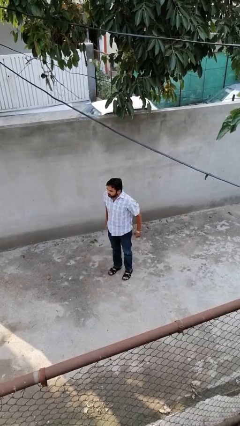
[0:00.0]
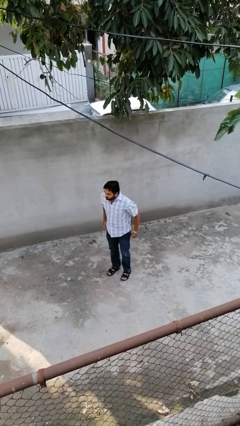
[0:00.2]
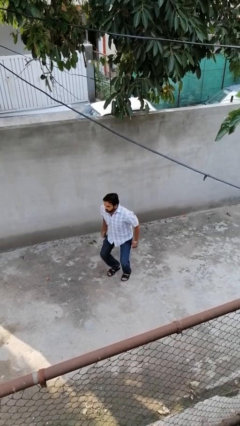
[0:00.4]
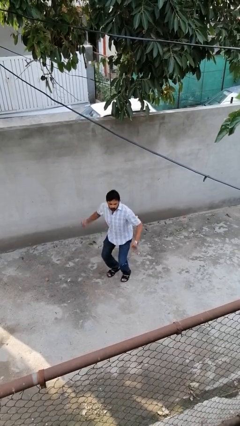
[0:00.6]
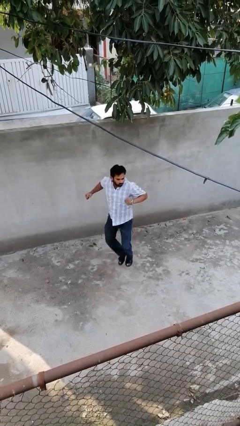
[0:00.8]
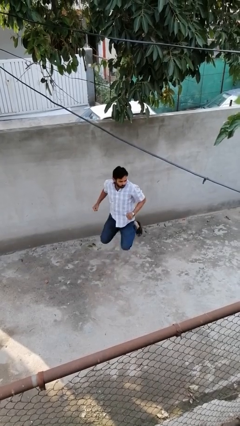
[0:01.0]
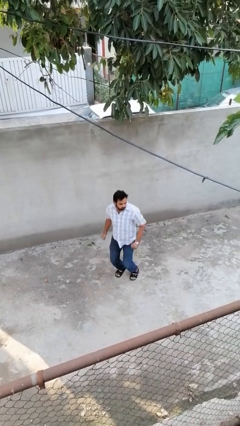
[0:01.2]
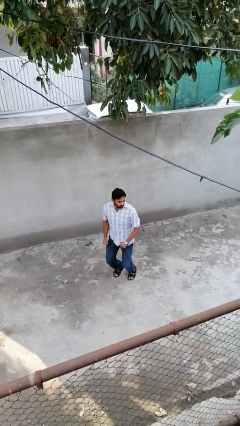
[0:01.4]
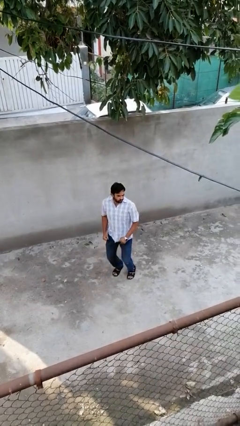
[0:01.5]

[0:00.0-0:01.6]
person jumps

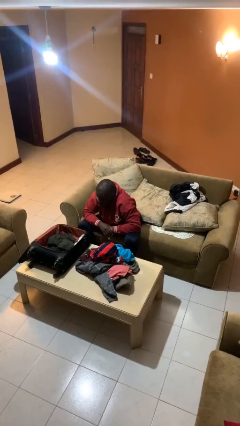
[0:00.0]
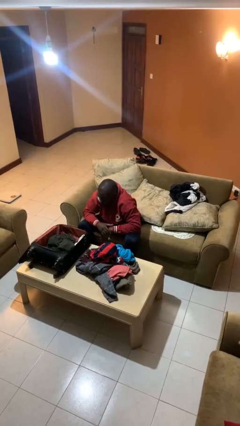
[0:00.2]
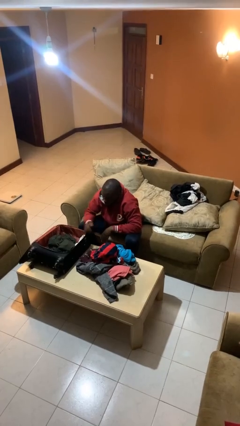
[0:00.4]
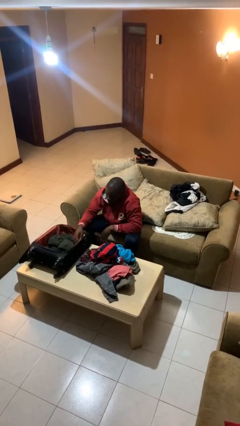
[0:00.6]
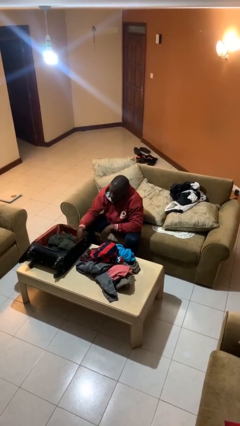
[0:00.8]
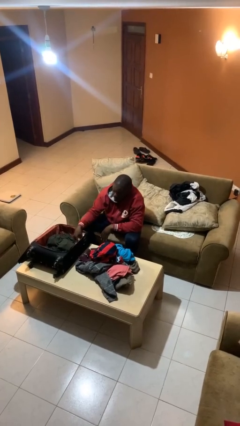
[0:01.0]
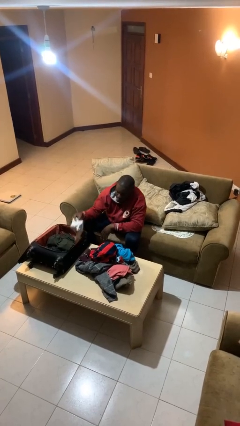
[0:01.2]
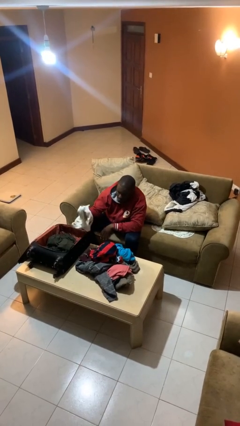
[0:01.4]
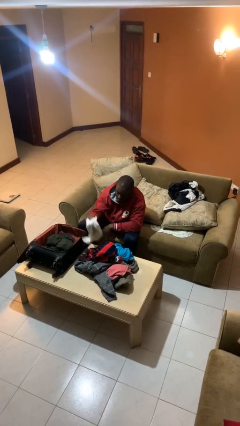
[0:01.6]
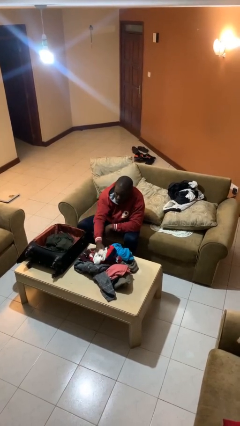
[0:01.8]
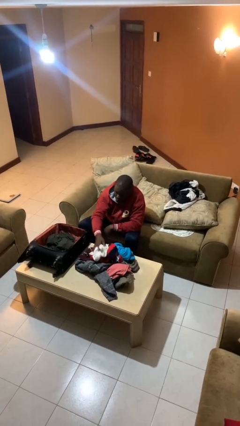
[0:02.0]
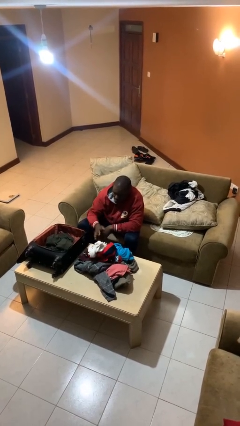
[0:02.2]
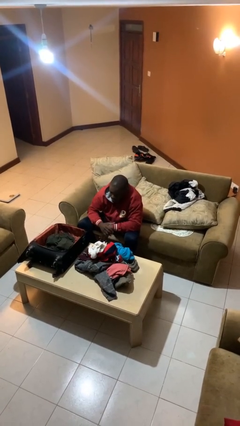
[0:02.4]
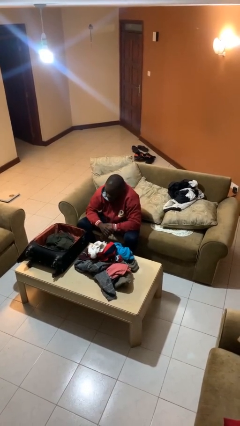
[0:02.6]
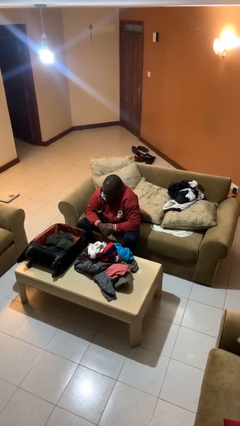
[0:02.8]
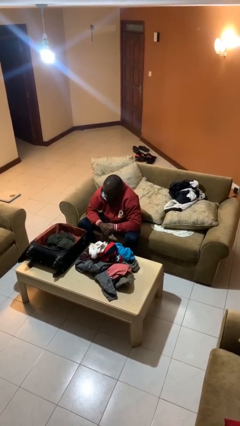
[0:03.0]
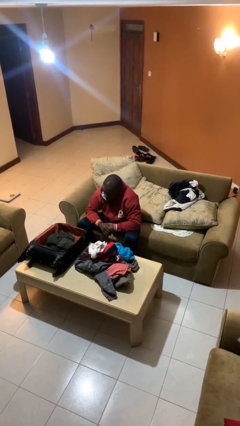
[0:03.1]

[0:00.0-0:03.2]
person unloads clothes from suitcase

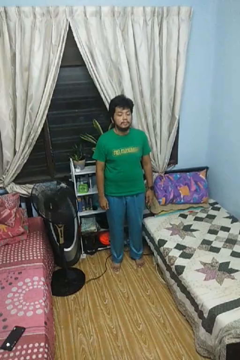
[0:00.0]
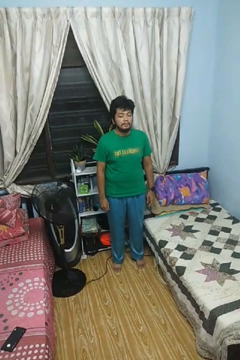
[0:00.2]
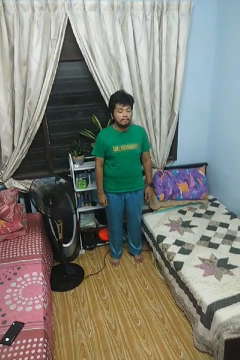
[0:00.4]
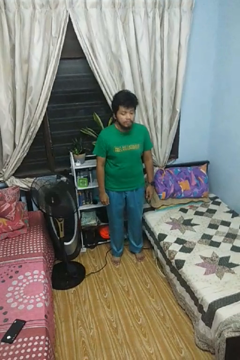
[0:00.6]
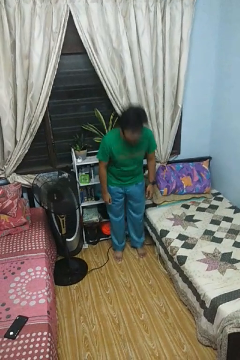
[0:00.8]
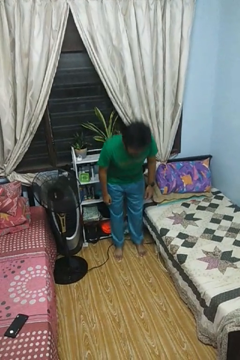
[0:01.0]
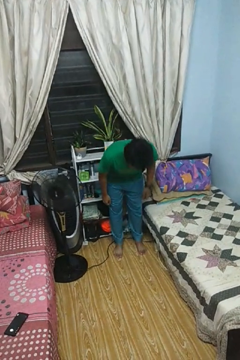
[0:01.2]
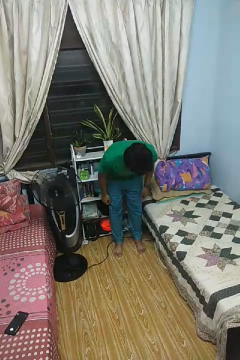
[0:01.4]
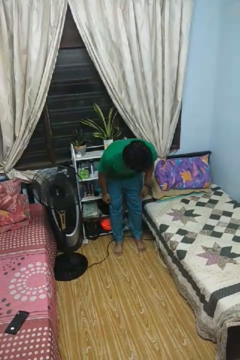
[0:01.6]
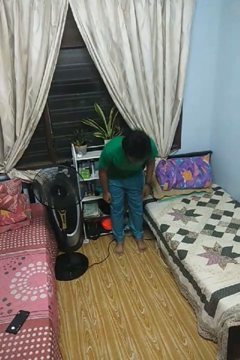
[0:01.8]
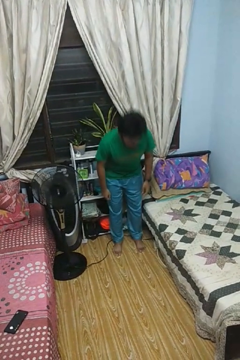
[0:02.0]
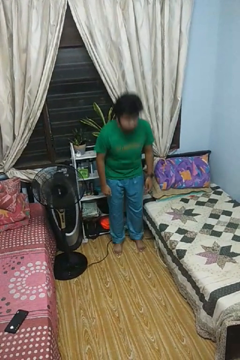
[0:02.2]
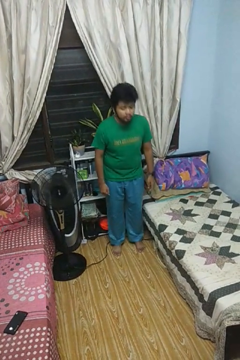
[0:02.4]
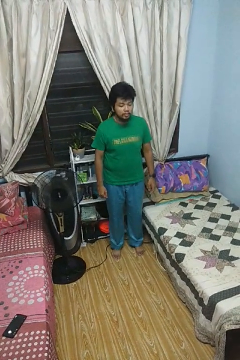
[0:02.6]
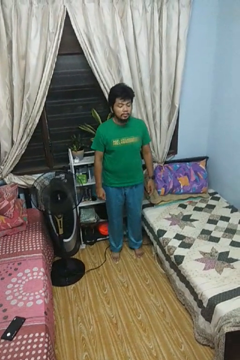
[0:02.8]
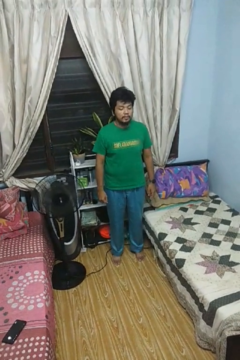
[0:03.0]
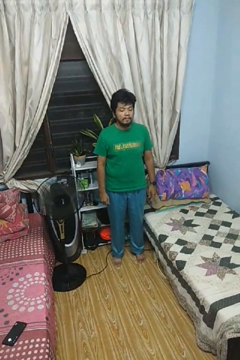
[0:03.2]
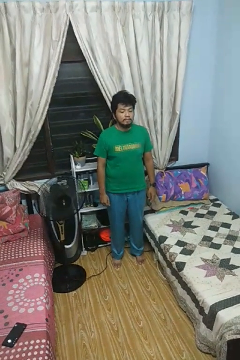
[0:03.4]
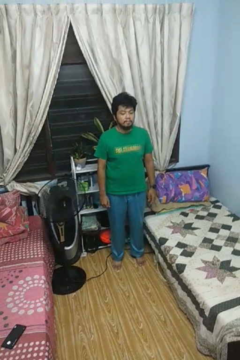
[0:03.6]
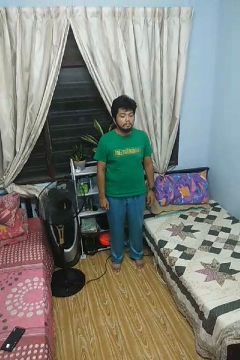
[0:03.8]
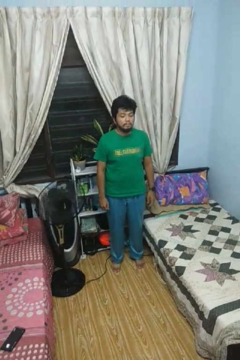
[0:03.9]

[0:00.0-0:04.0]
person bows

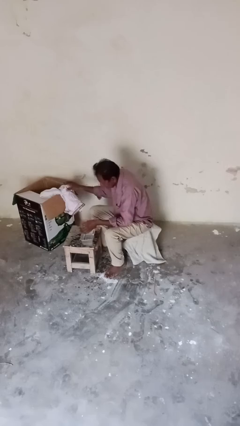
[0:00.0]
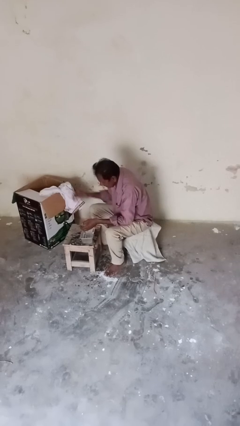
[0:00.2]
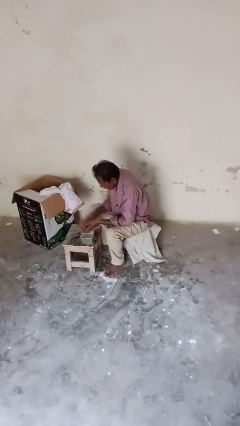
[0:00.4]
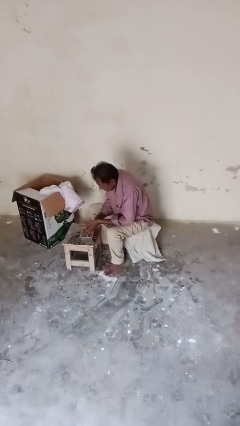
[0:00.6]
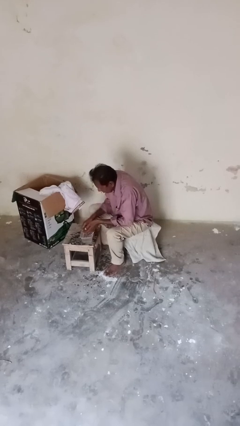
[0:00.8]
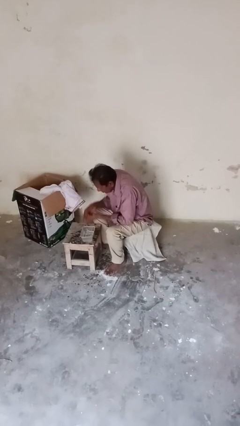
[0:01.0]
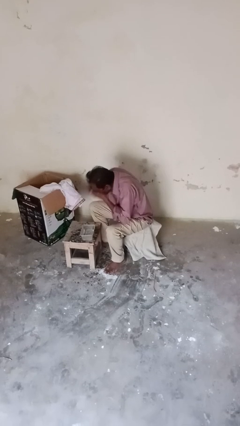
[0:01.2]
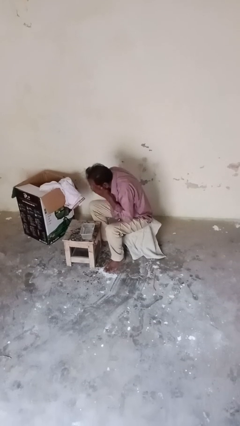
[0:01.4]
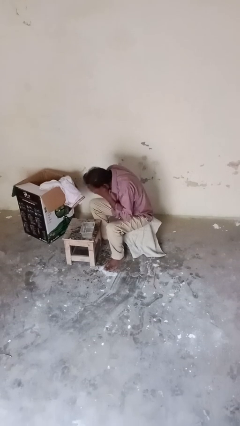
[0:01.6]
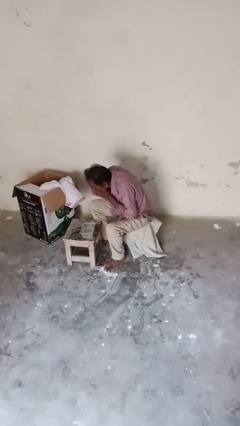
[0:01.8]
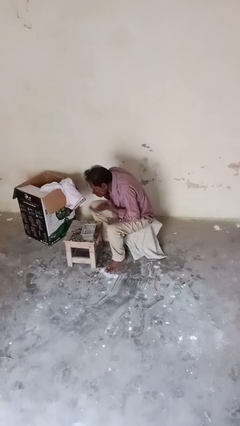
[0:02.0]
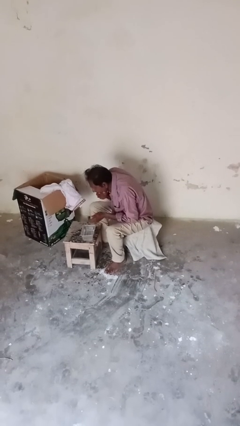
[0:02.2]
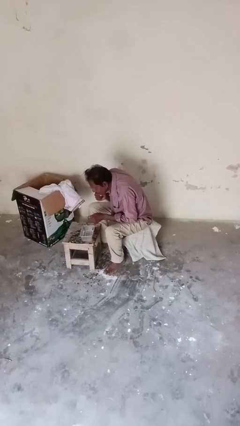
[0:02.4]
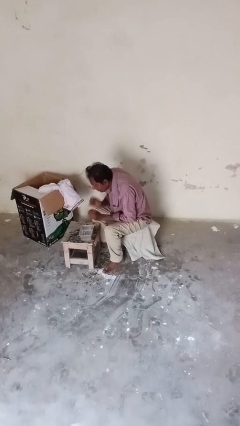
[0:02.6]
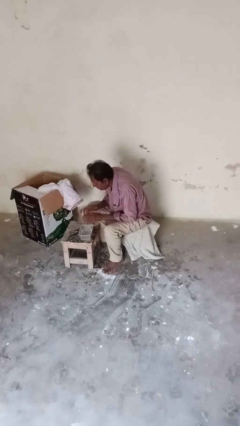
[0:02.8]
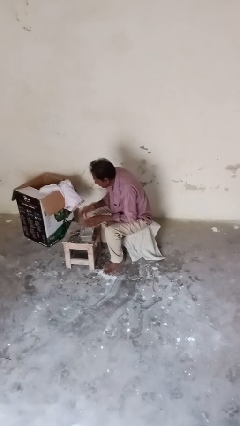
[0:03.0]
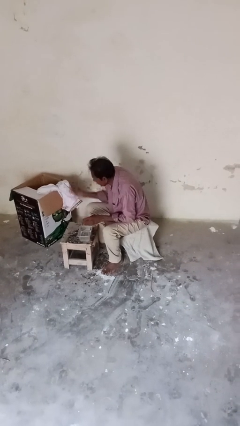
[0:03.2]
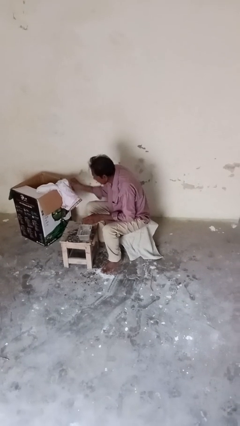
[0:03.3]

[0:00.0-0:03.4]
person washes face

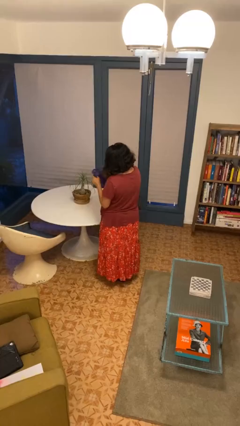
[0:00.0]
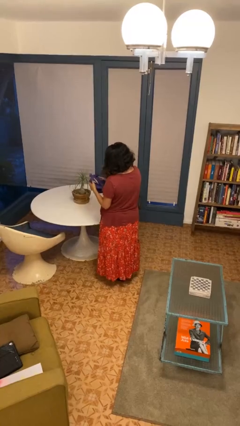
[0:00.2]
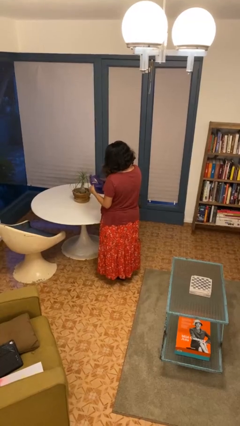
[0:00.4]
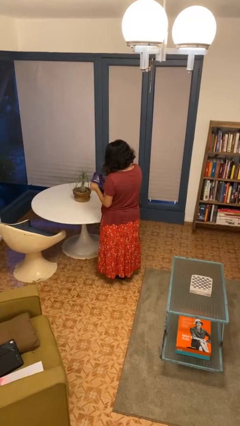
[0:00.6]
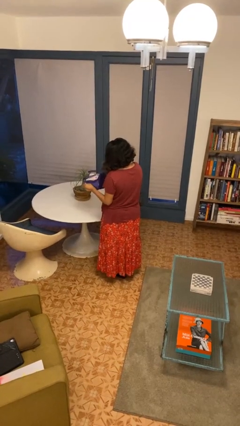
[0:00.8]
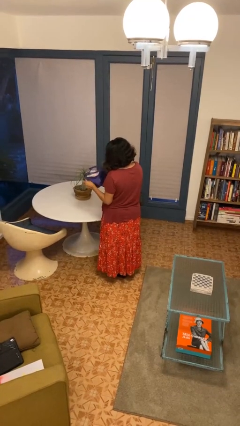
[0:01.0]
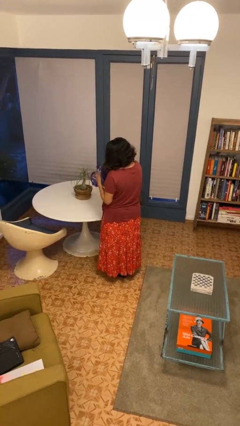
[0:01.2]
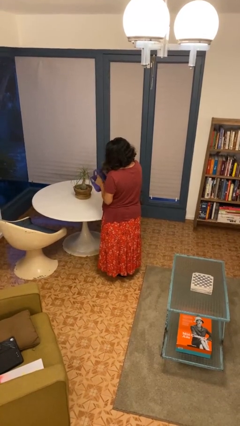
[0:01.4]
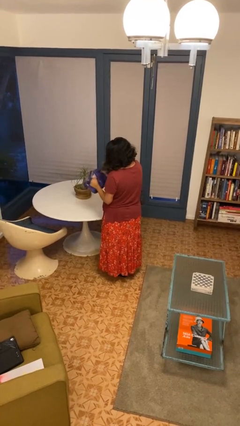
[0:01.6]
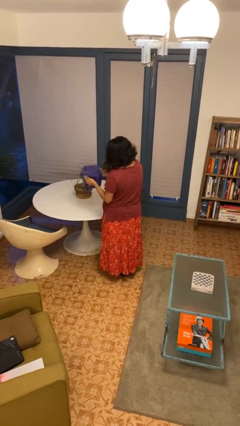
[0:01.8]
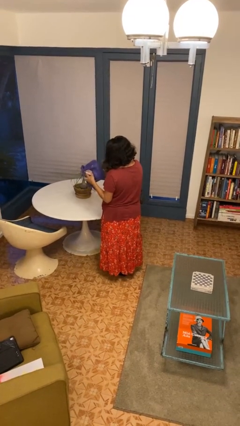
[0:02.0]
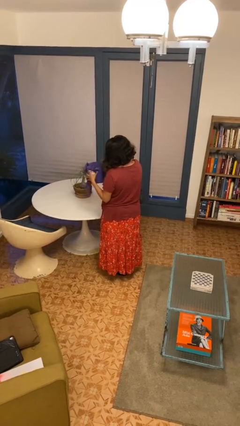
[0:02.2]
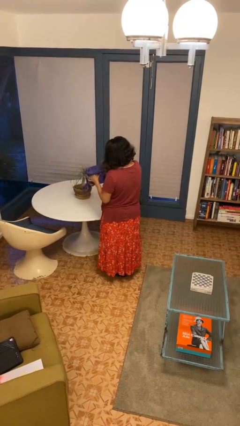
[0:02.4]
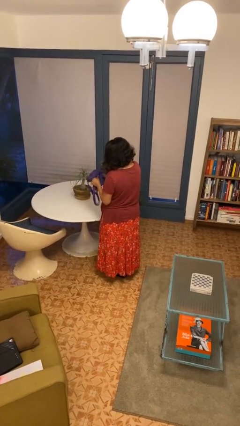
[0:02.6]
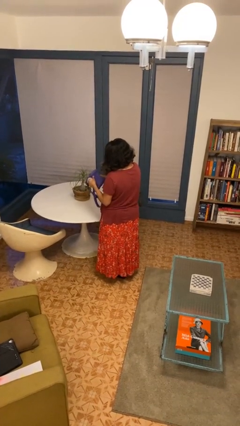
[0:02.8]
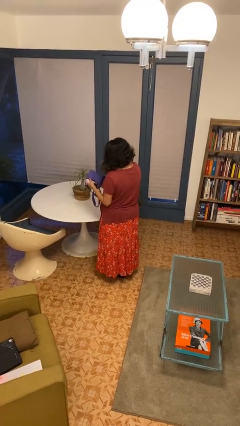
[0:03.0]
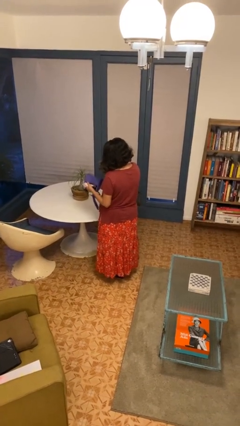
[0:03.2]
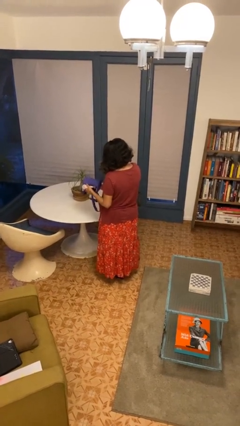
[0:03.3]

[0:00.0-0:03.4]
person squeezes object

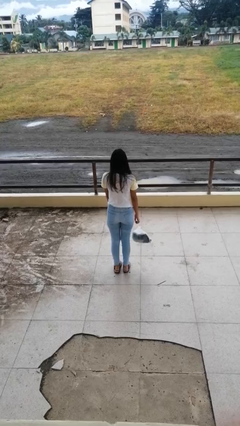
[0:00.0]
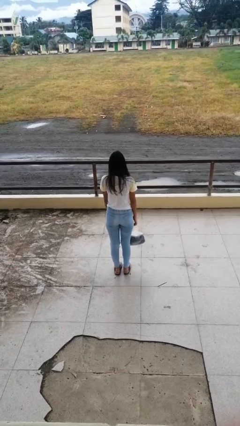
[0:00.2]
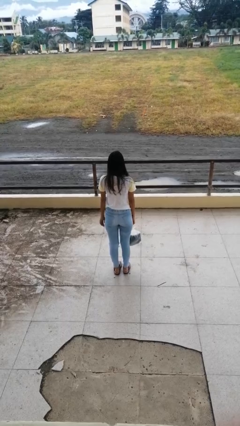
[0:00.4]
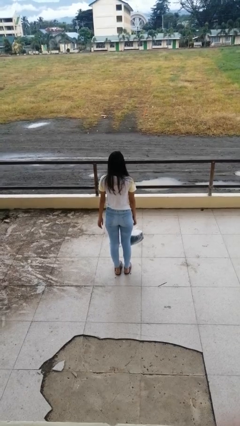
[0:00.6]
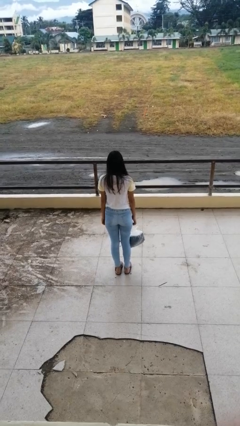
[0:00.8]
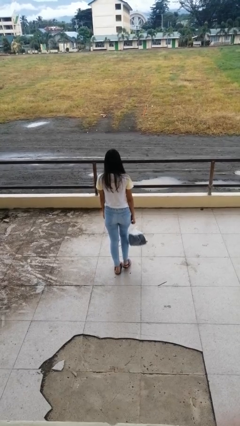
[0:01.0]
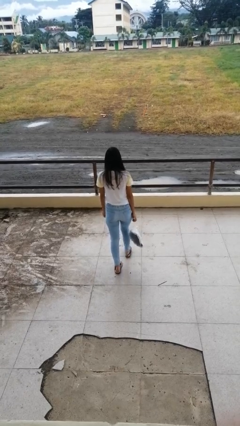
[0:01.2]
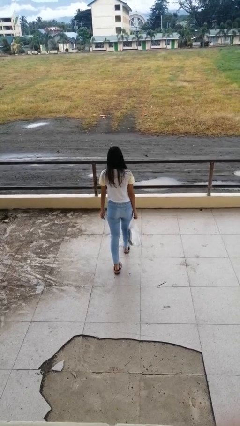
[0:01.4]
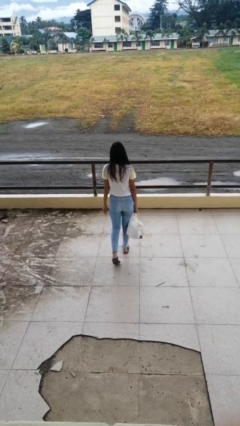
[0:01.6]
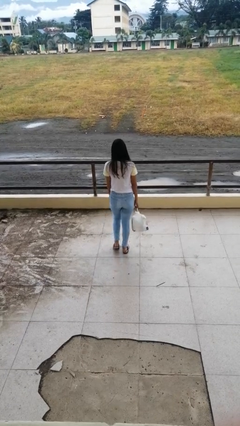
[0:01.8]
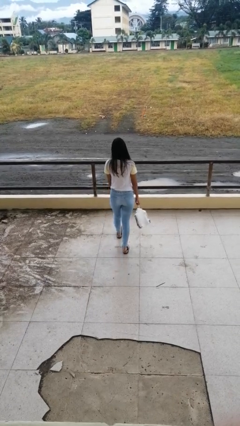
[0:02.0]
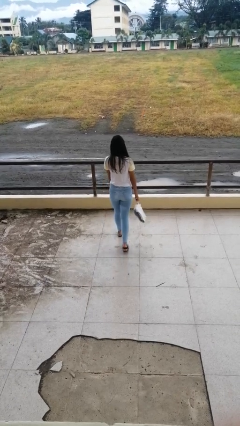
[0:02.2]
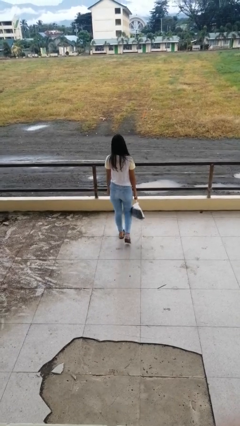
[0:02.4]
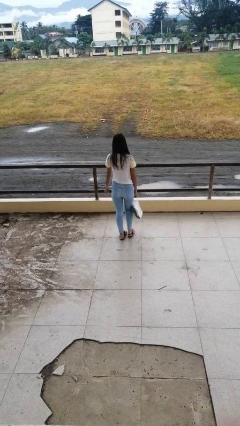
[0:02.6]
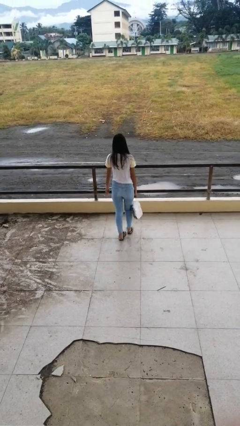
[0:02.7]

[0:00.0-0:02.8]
person carries groceries
